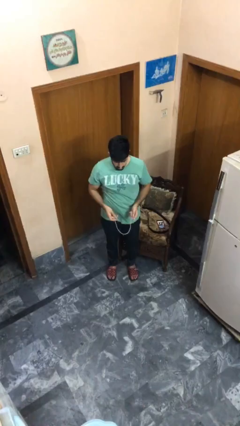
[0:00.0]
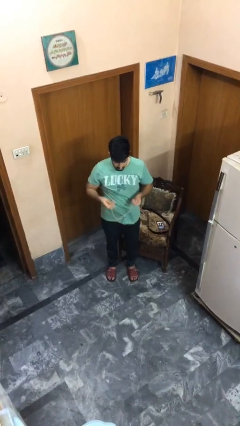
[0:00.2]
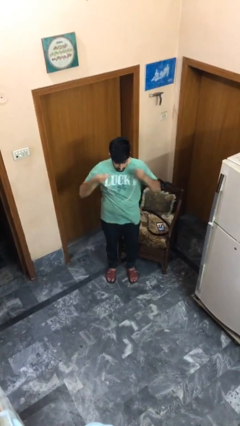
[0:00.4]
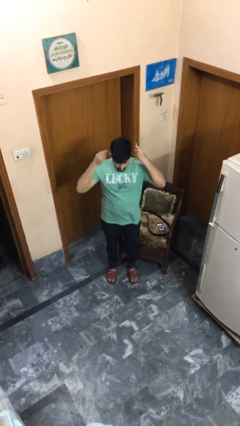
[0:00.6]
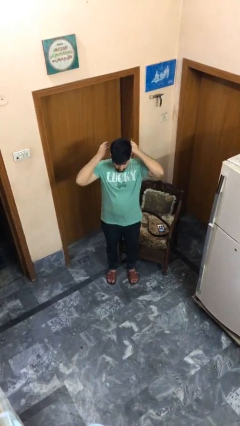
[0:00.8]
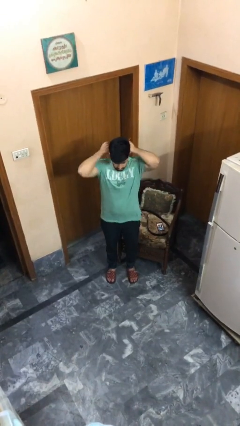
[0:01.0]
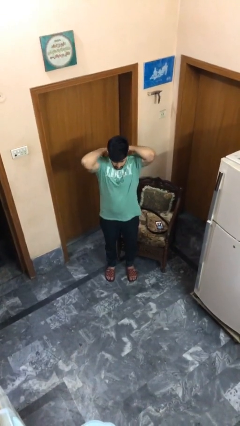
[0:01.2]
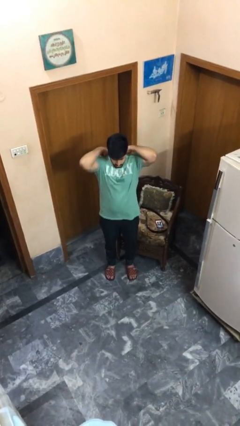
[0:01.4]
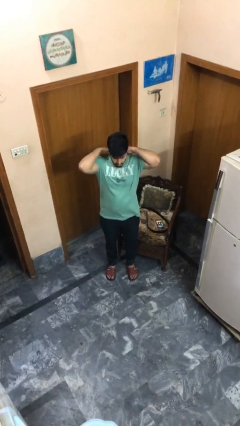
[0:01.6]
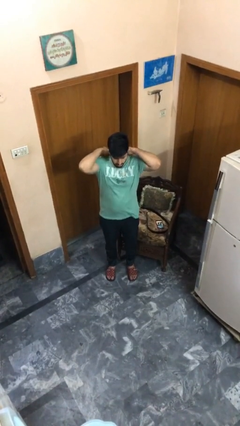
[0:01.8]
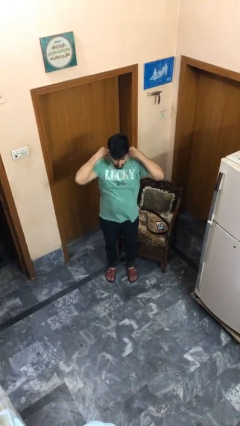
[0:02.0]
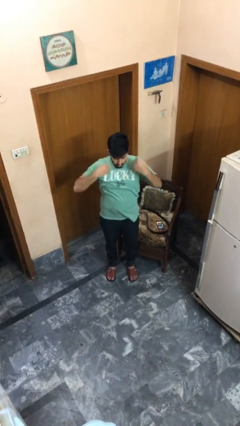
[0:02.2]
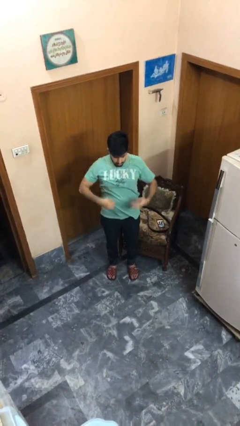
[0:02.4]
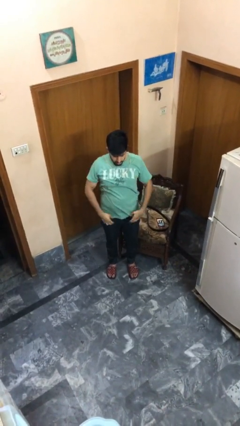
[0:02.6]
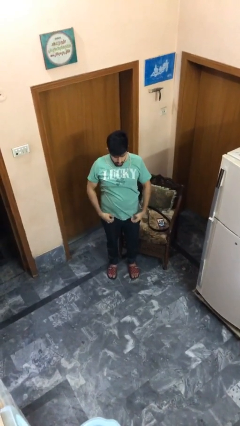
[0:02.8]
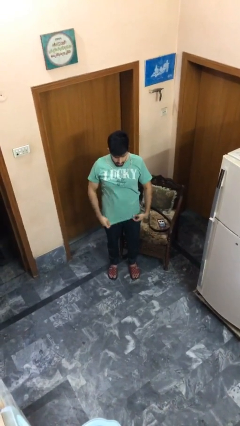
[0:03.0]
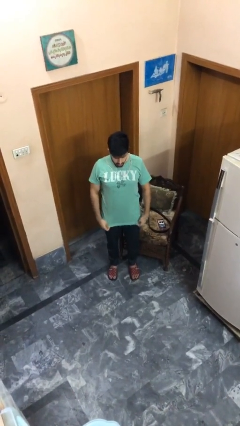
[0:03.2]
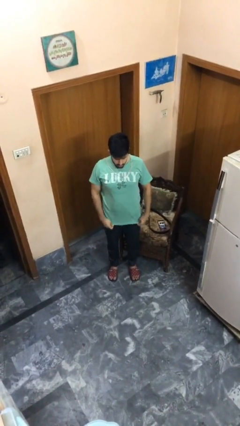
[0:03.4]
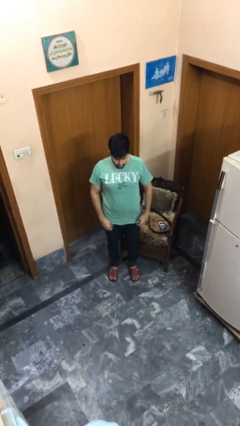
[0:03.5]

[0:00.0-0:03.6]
person puts on necklace

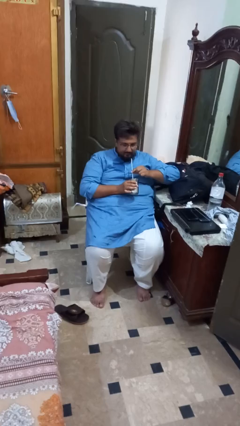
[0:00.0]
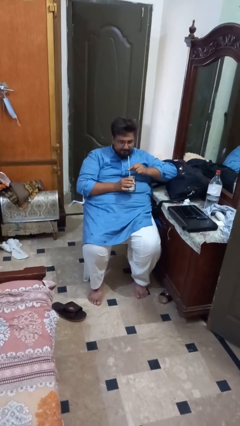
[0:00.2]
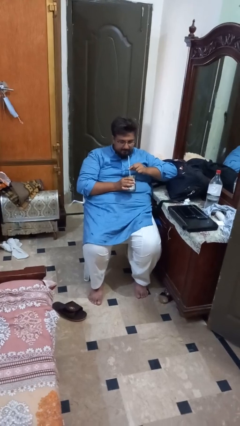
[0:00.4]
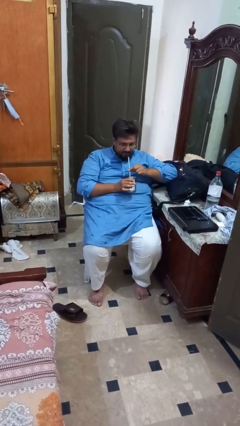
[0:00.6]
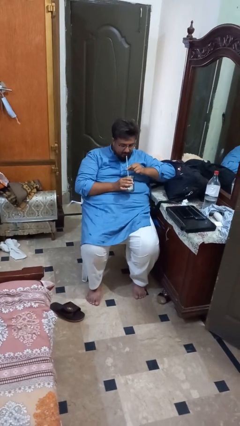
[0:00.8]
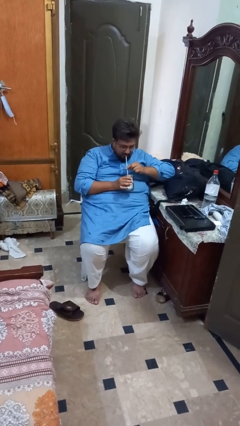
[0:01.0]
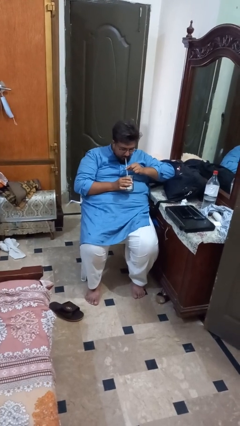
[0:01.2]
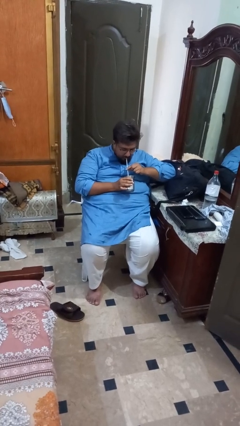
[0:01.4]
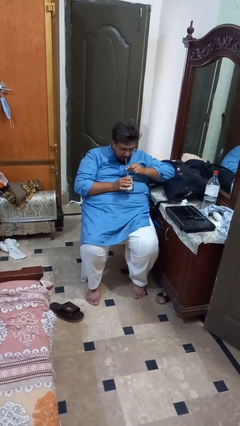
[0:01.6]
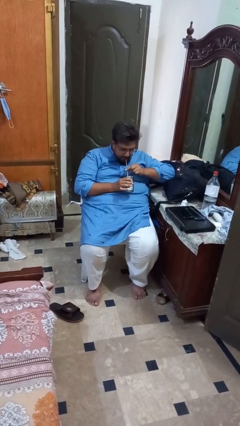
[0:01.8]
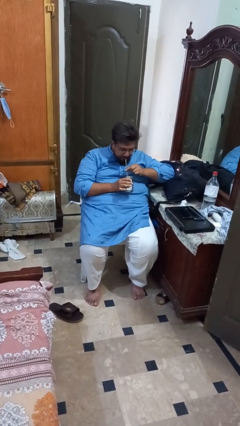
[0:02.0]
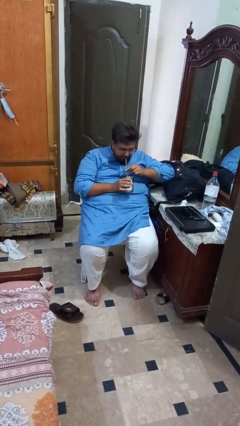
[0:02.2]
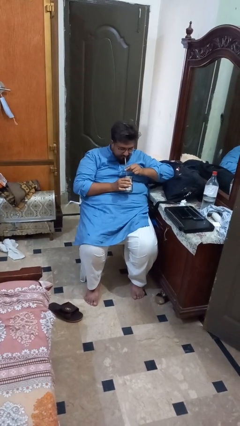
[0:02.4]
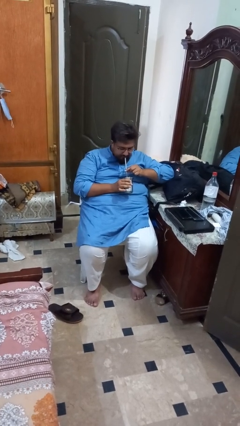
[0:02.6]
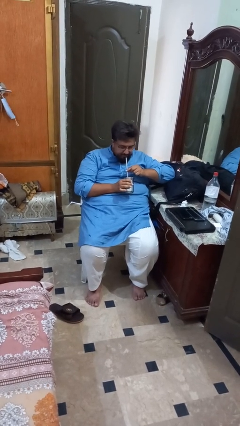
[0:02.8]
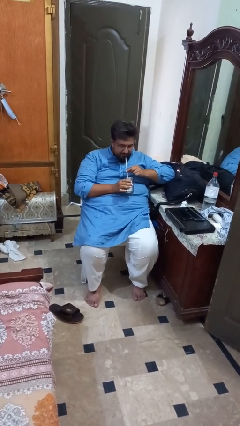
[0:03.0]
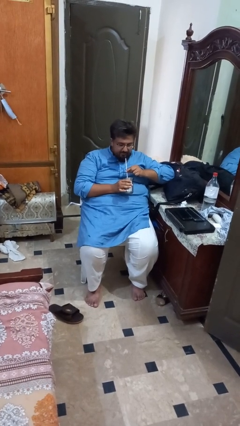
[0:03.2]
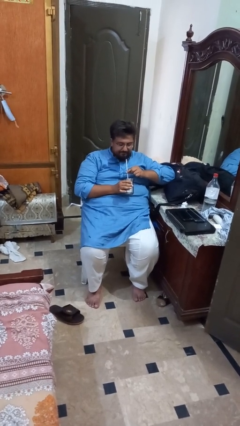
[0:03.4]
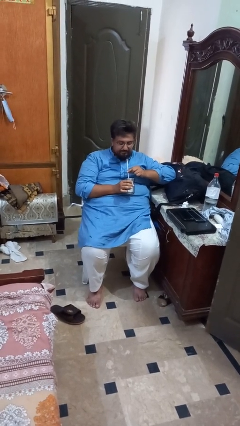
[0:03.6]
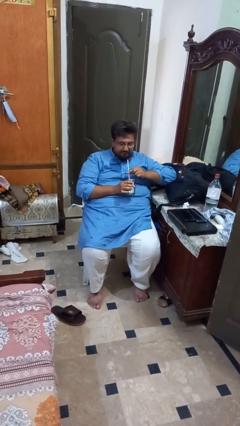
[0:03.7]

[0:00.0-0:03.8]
person drinks from straw

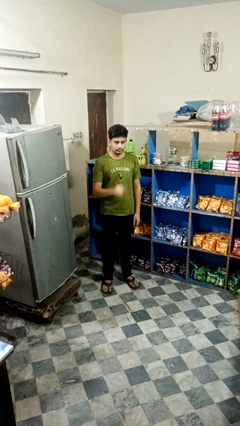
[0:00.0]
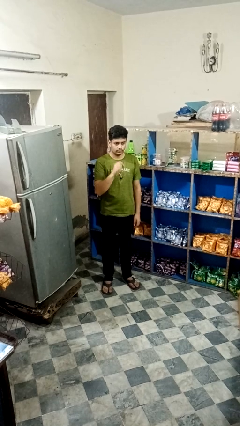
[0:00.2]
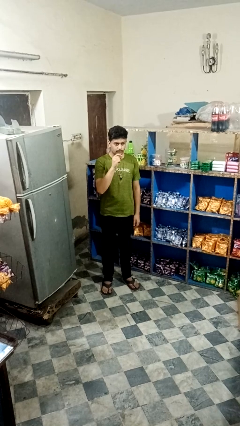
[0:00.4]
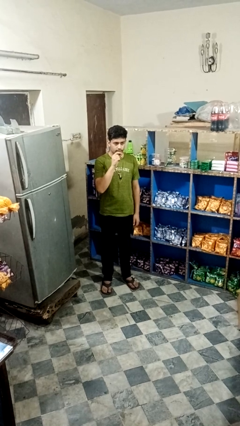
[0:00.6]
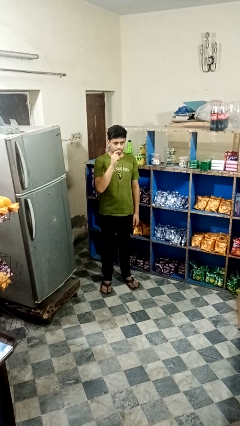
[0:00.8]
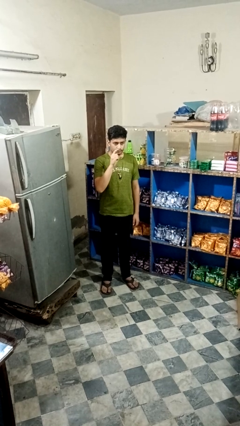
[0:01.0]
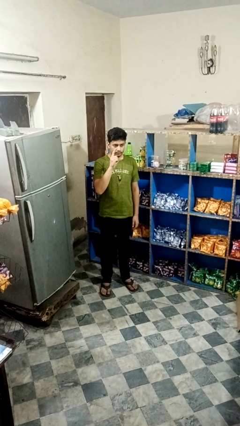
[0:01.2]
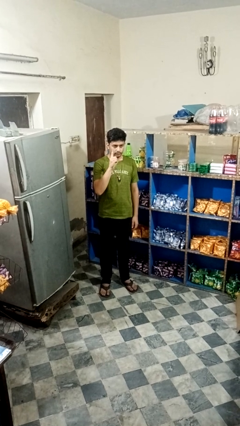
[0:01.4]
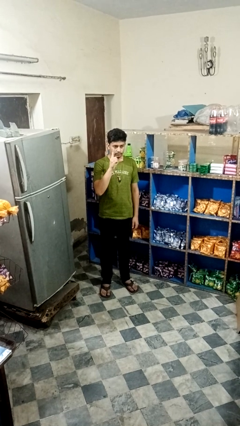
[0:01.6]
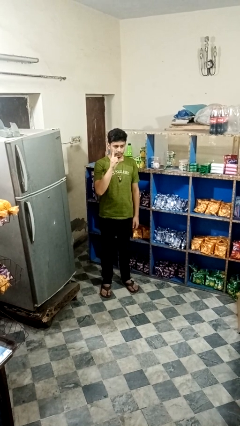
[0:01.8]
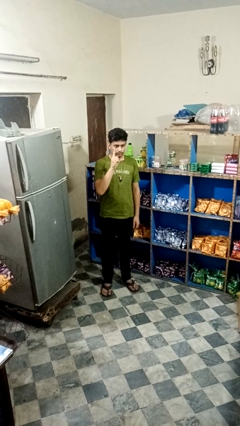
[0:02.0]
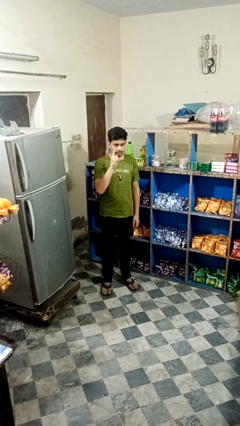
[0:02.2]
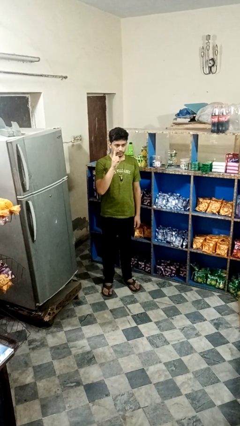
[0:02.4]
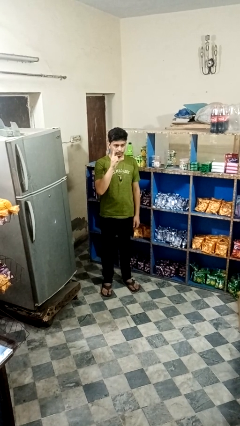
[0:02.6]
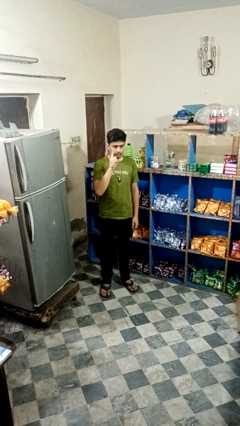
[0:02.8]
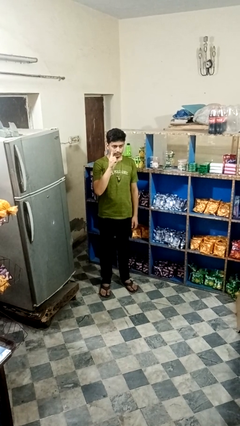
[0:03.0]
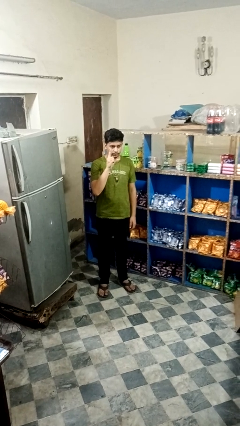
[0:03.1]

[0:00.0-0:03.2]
person gestures zoom in

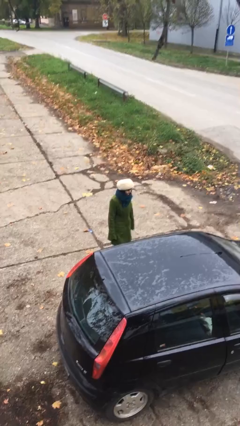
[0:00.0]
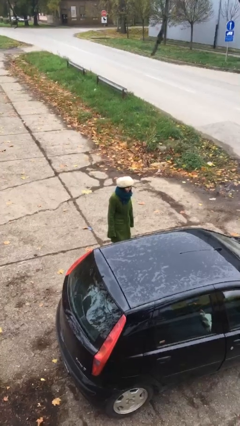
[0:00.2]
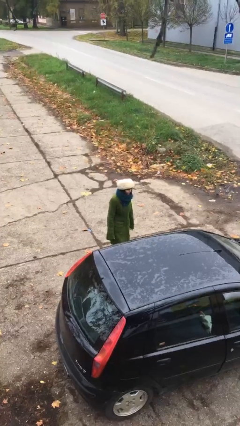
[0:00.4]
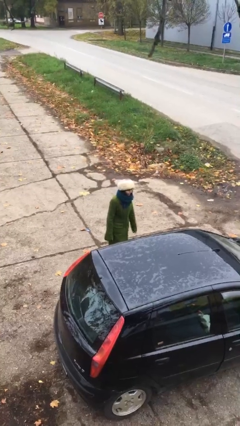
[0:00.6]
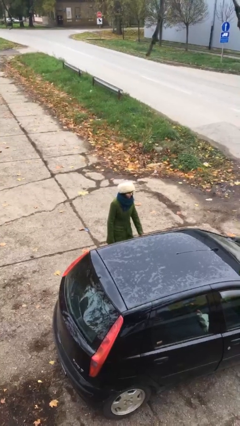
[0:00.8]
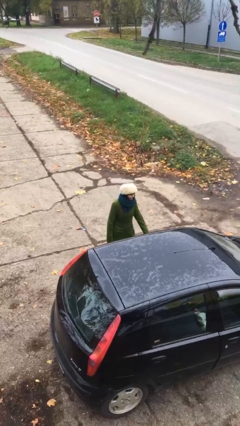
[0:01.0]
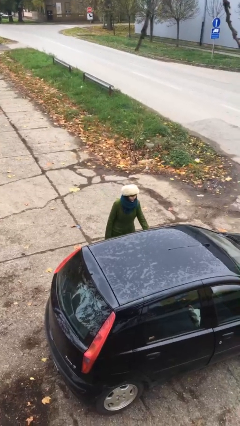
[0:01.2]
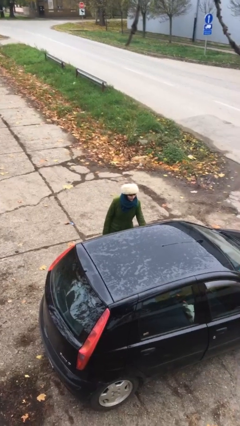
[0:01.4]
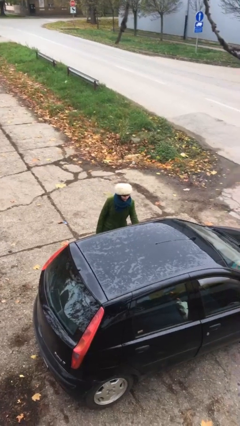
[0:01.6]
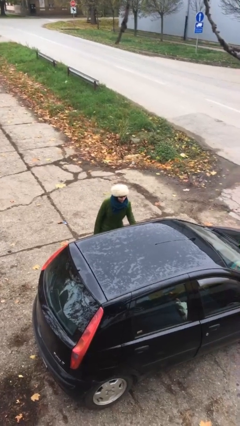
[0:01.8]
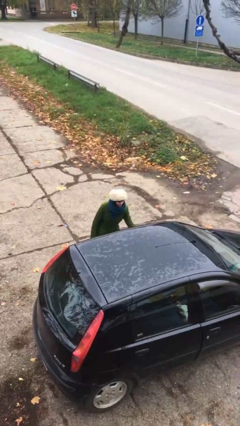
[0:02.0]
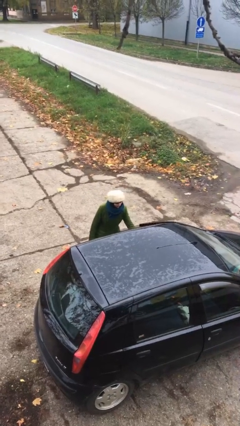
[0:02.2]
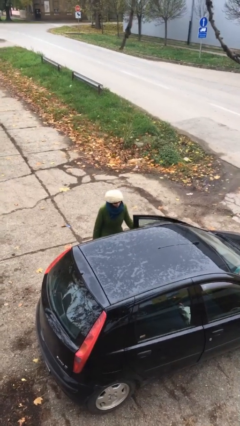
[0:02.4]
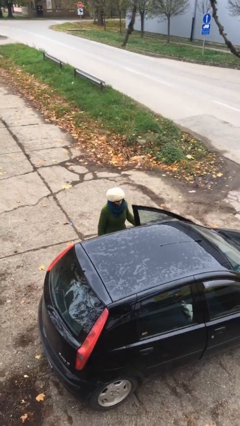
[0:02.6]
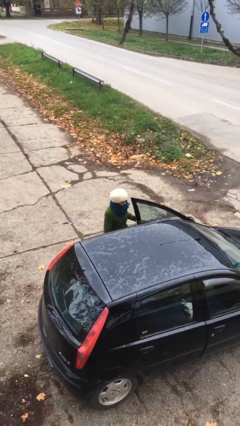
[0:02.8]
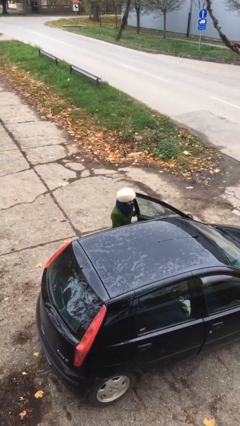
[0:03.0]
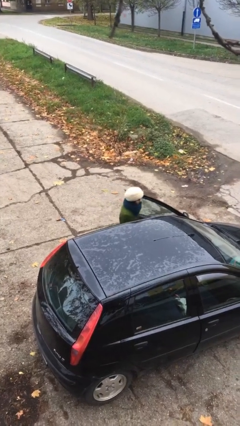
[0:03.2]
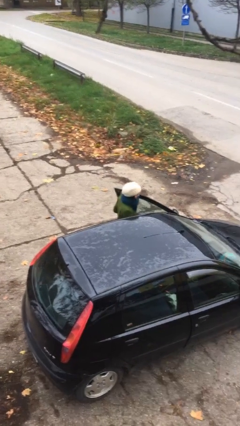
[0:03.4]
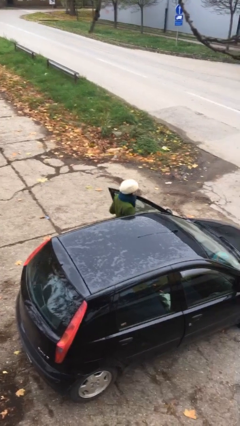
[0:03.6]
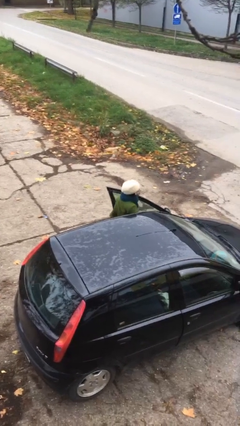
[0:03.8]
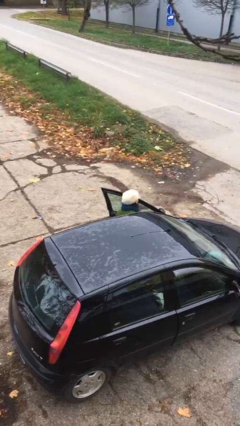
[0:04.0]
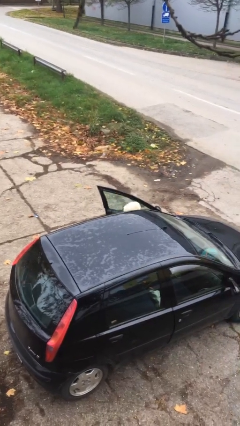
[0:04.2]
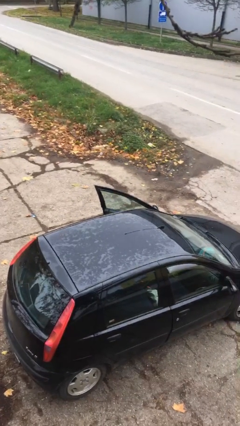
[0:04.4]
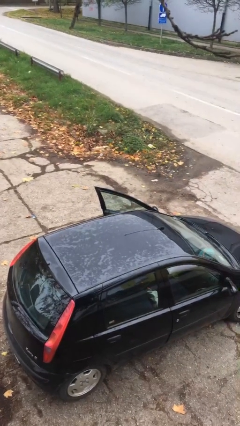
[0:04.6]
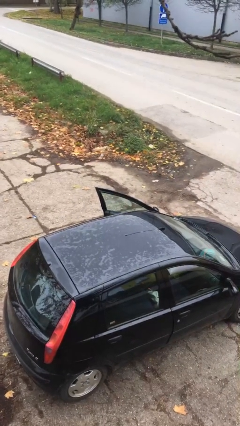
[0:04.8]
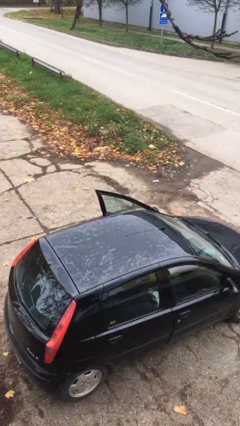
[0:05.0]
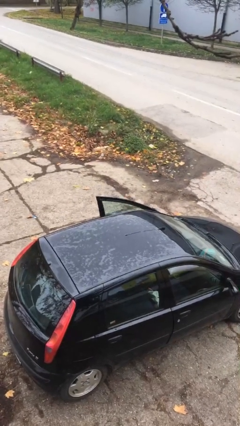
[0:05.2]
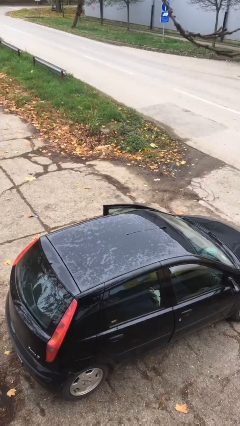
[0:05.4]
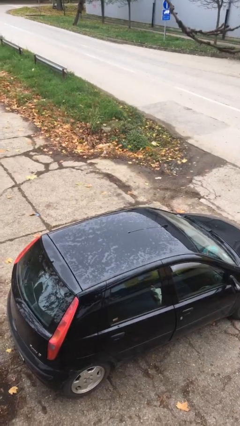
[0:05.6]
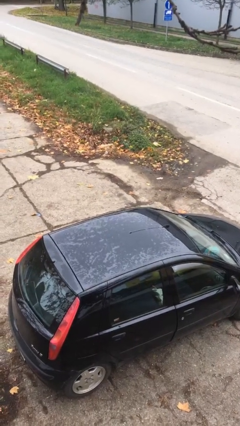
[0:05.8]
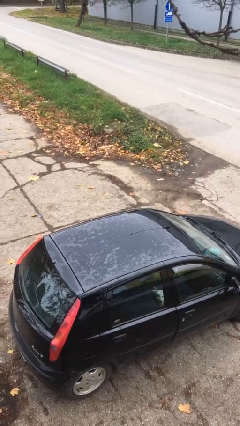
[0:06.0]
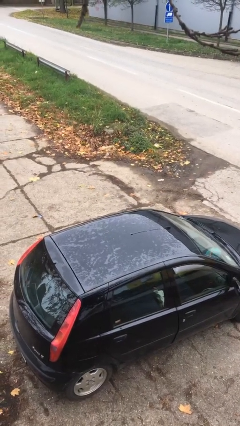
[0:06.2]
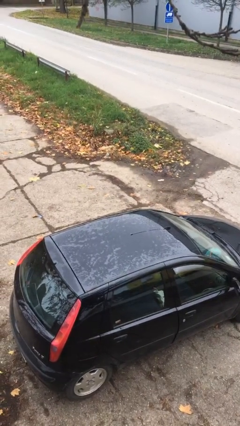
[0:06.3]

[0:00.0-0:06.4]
person enters car

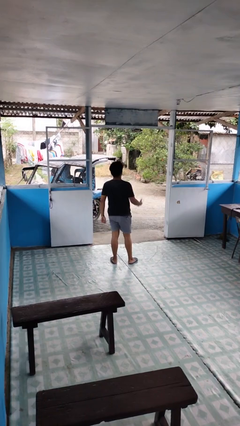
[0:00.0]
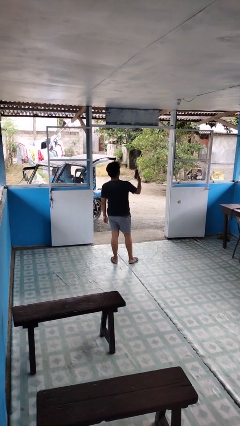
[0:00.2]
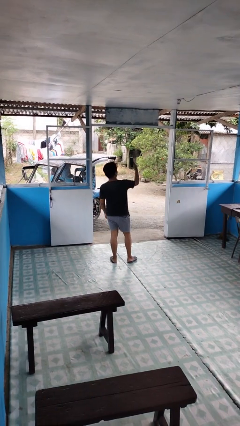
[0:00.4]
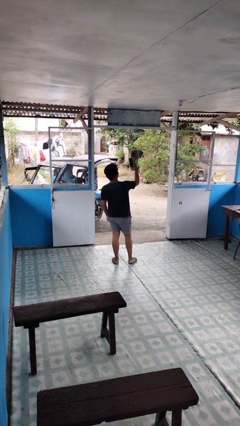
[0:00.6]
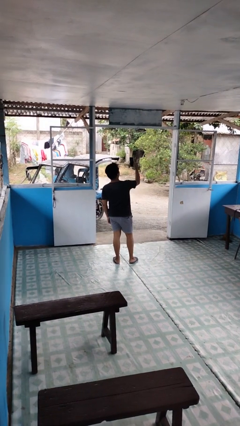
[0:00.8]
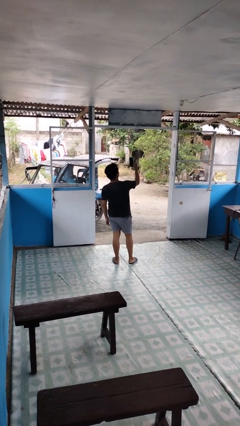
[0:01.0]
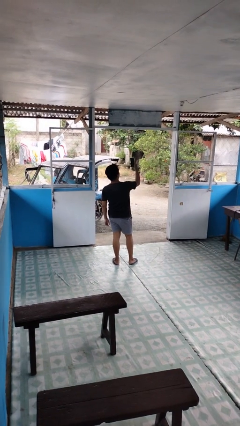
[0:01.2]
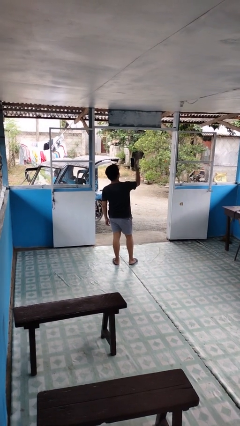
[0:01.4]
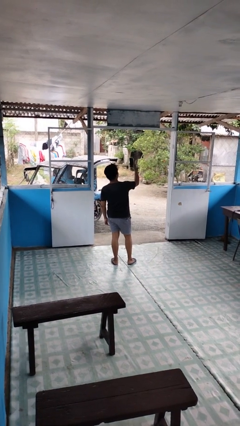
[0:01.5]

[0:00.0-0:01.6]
person takes selfie
